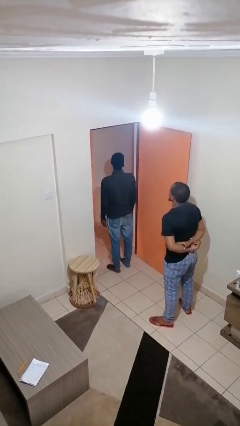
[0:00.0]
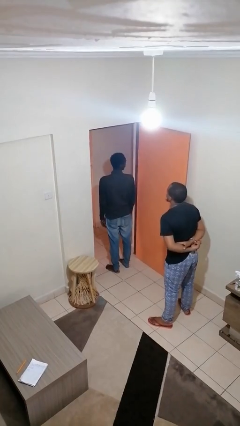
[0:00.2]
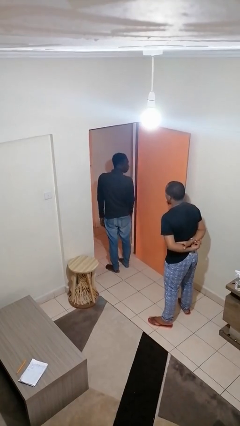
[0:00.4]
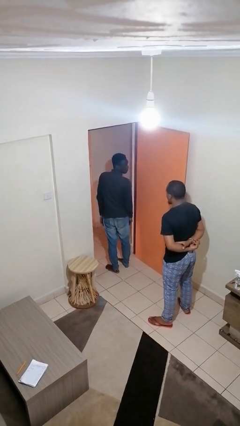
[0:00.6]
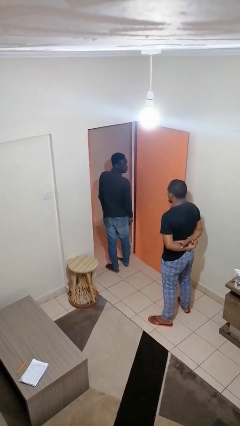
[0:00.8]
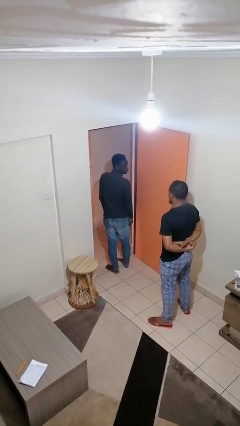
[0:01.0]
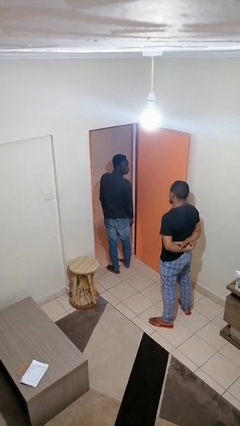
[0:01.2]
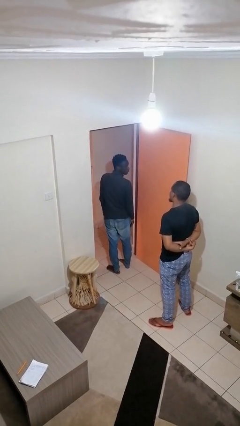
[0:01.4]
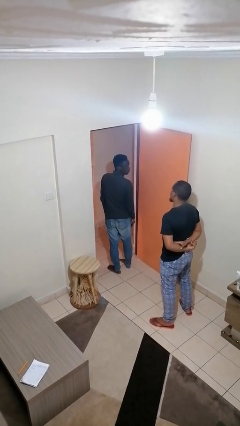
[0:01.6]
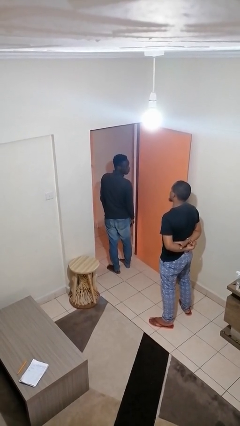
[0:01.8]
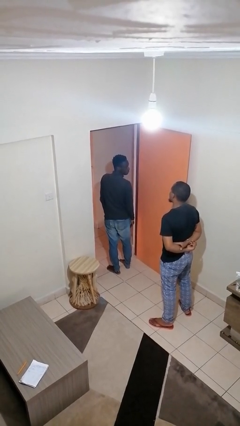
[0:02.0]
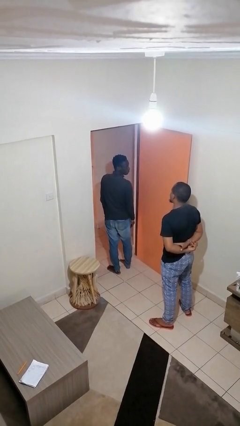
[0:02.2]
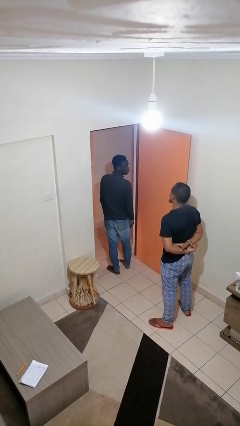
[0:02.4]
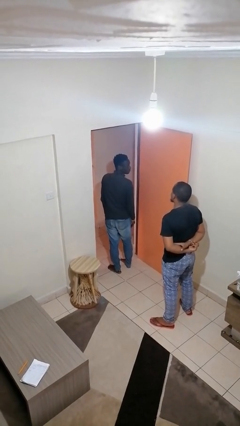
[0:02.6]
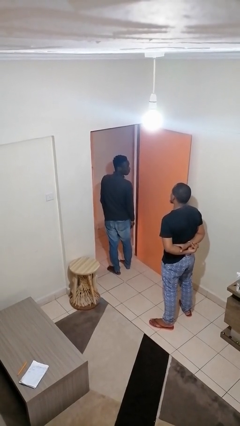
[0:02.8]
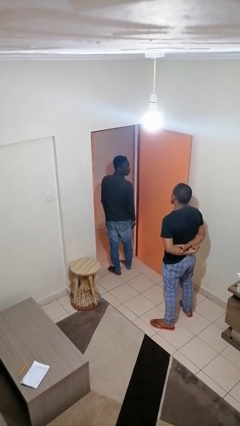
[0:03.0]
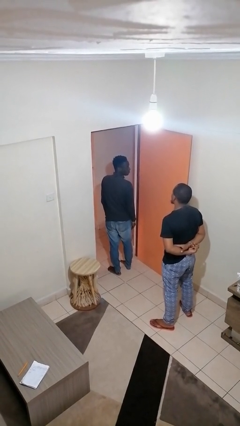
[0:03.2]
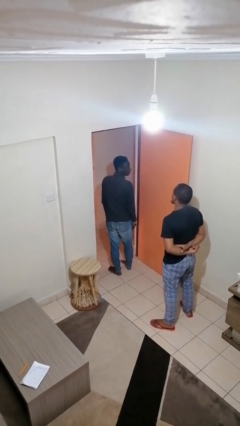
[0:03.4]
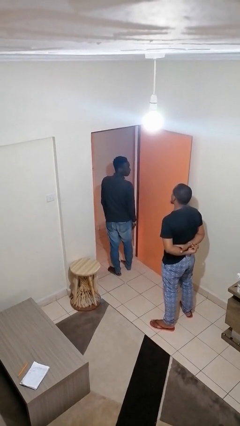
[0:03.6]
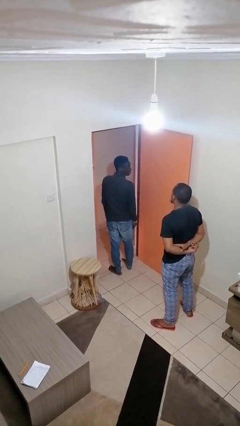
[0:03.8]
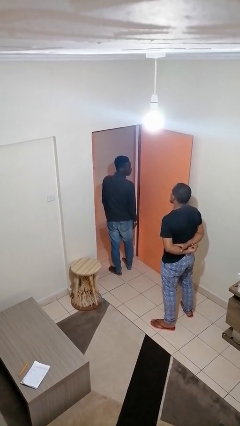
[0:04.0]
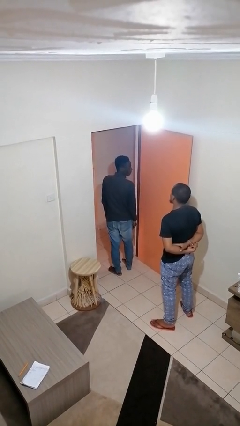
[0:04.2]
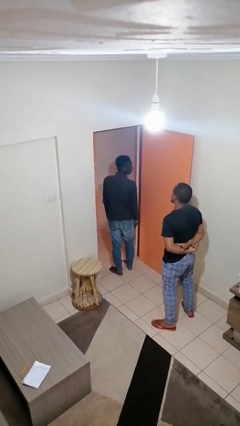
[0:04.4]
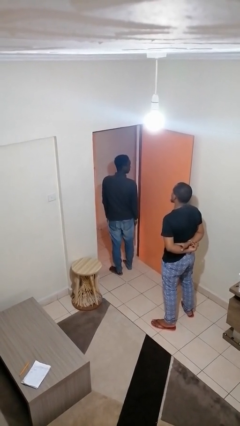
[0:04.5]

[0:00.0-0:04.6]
person looks over shoulder

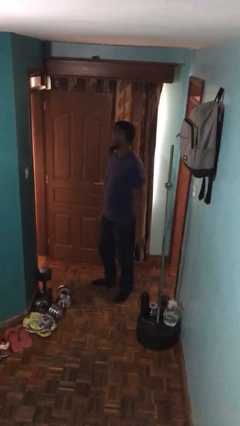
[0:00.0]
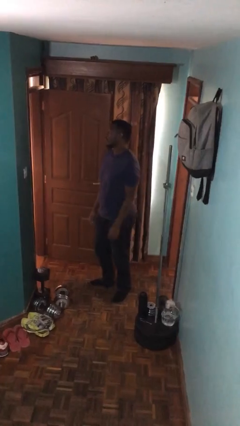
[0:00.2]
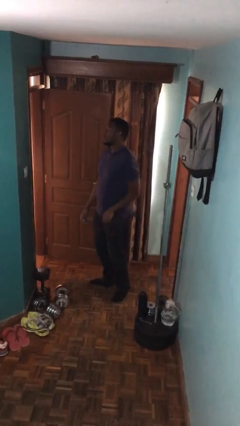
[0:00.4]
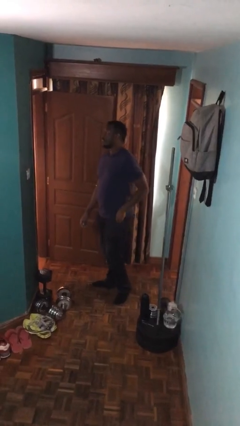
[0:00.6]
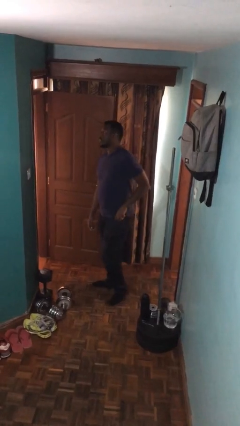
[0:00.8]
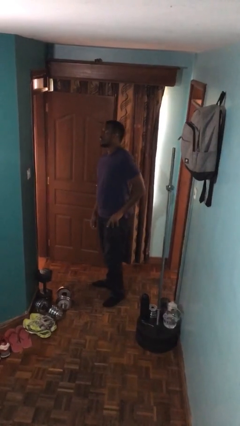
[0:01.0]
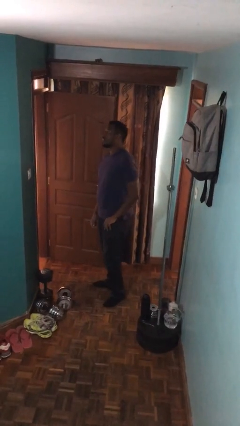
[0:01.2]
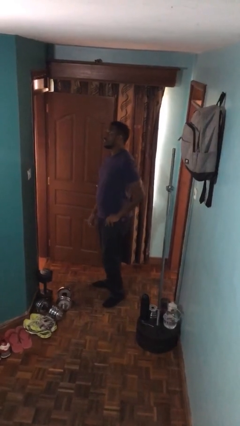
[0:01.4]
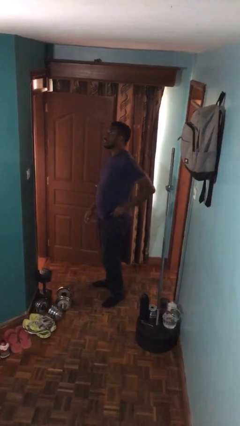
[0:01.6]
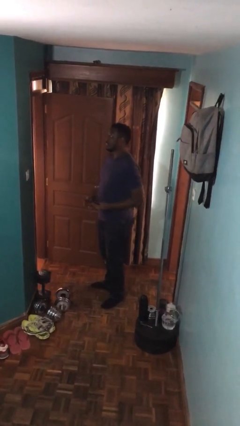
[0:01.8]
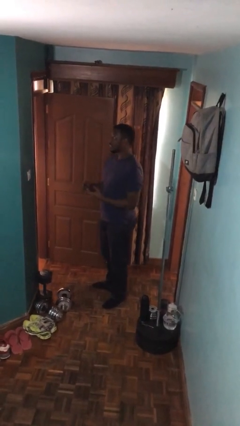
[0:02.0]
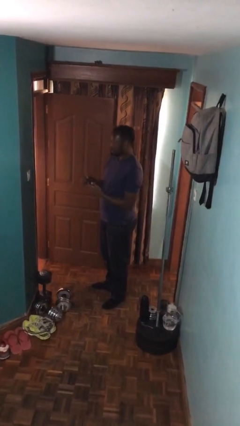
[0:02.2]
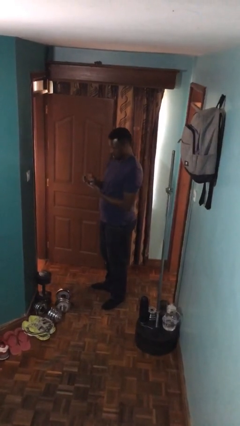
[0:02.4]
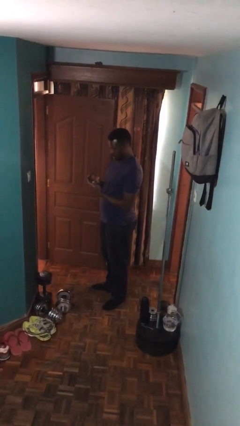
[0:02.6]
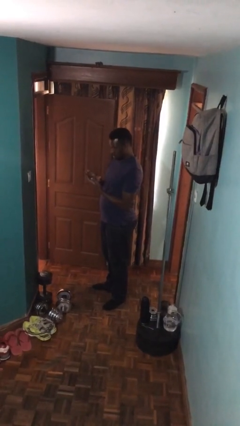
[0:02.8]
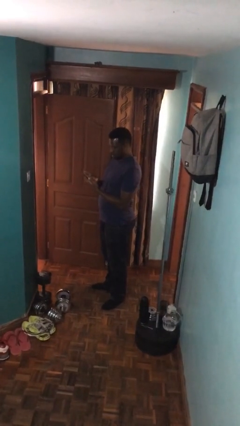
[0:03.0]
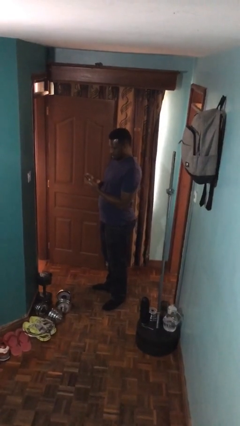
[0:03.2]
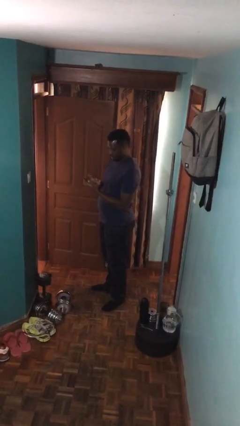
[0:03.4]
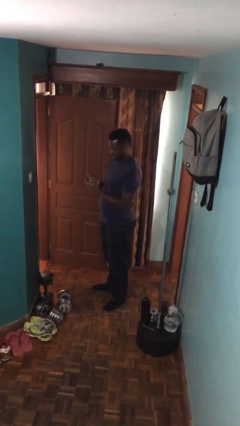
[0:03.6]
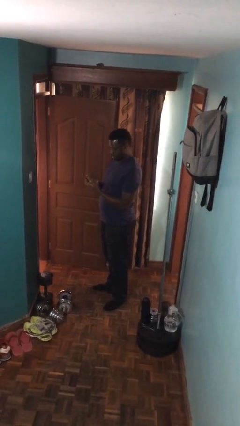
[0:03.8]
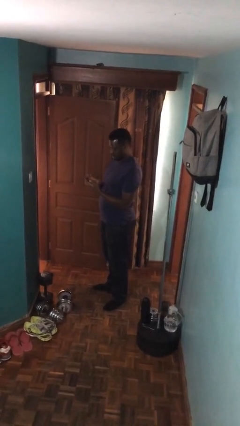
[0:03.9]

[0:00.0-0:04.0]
person takes phone from pocket

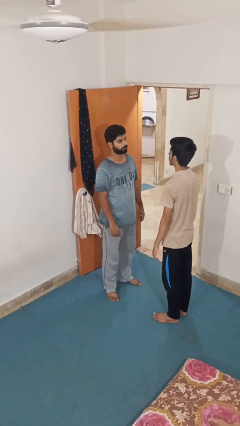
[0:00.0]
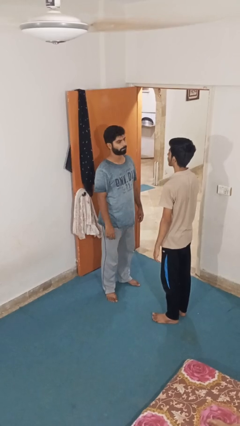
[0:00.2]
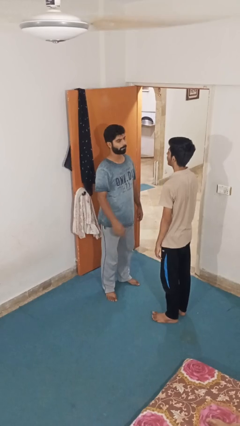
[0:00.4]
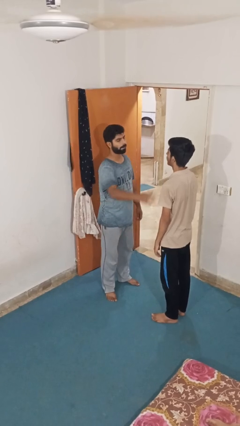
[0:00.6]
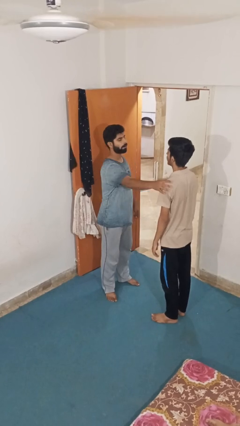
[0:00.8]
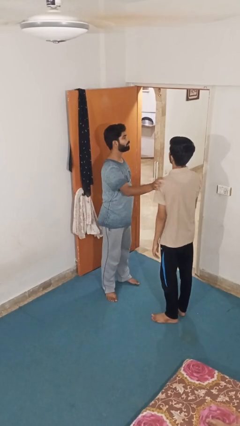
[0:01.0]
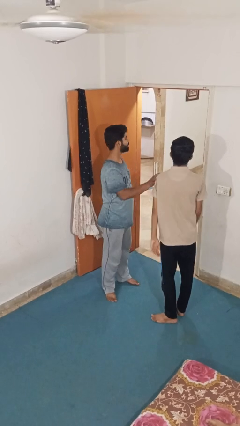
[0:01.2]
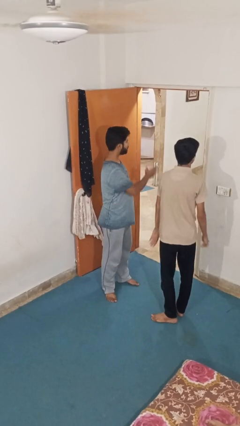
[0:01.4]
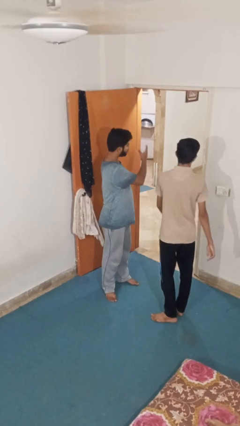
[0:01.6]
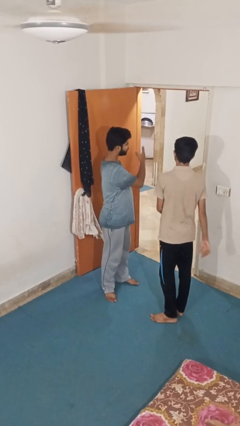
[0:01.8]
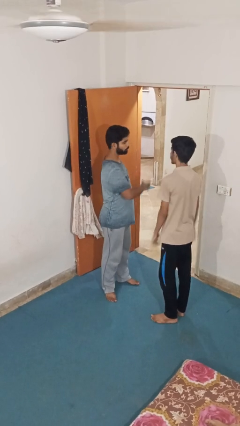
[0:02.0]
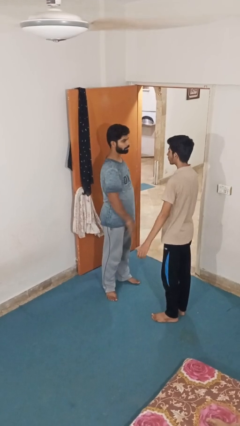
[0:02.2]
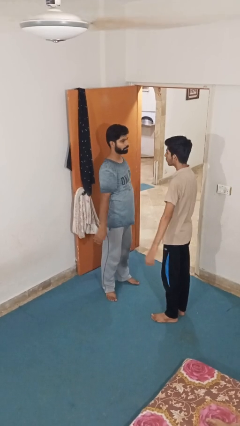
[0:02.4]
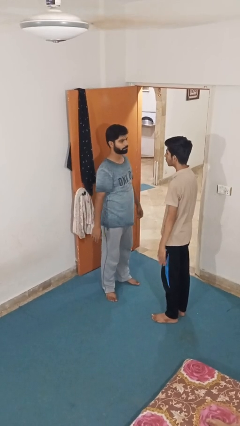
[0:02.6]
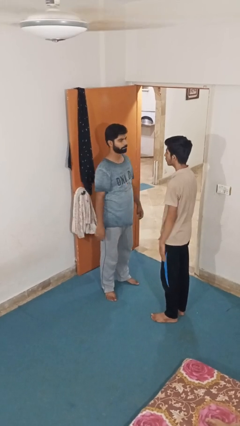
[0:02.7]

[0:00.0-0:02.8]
person shoves person

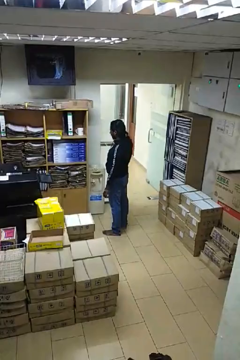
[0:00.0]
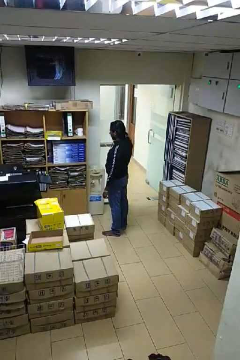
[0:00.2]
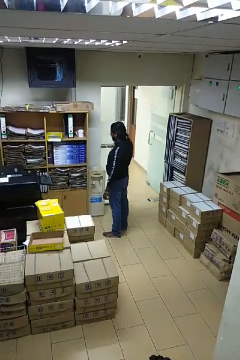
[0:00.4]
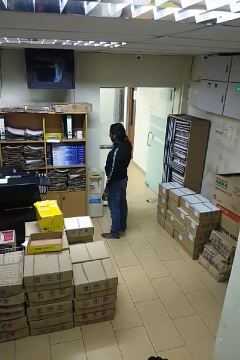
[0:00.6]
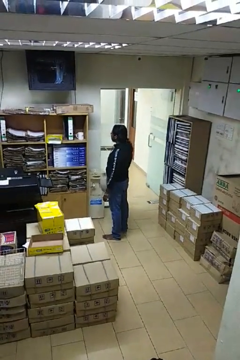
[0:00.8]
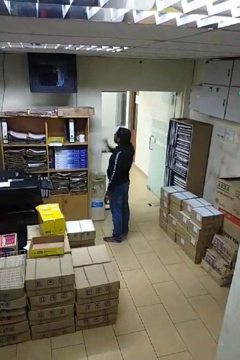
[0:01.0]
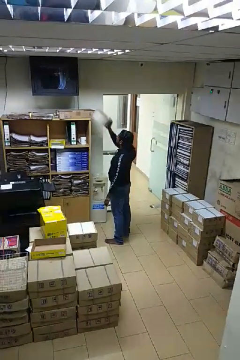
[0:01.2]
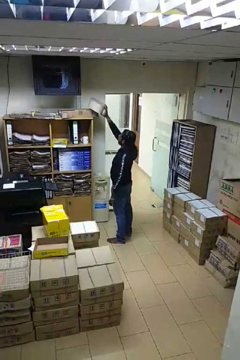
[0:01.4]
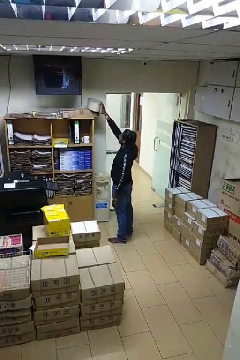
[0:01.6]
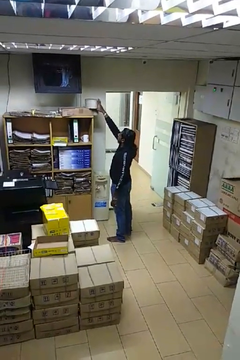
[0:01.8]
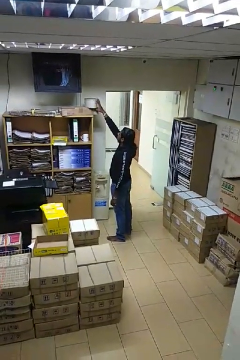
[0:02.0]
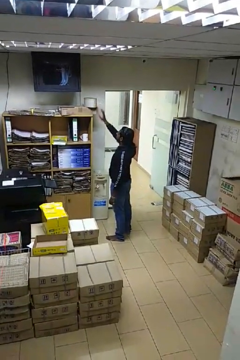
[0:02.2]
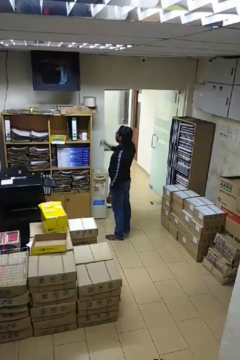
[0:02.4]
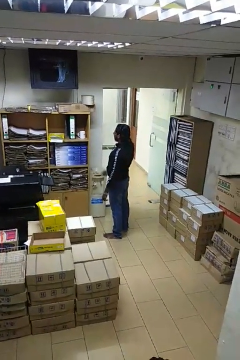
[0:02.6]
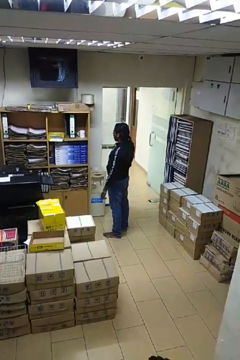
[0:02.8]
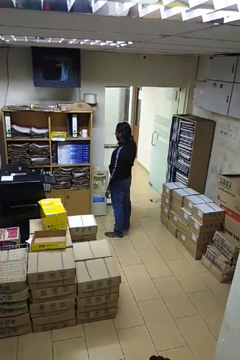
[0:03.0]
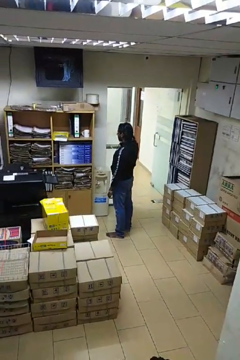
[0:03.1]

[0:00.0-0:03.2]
person puts down object on shelf

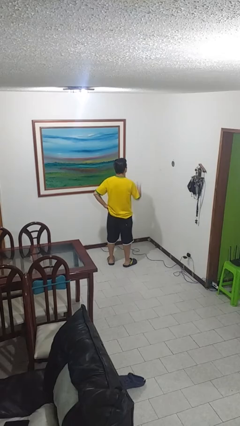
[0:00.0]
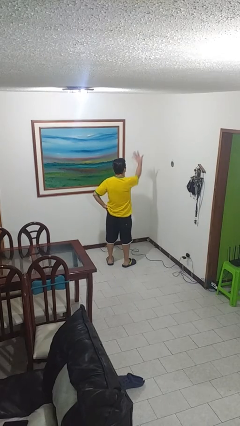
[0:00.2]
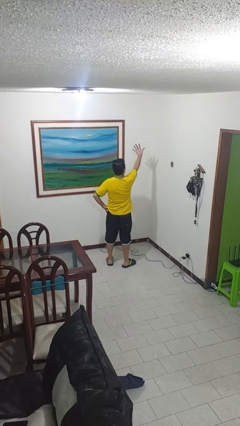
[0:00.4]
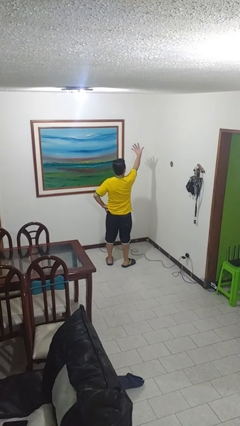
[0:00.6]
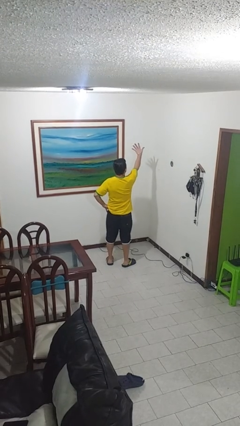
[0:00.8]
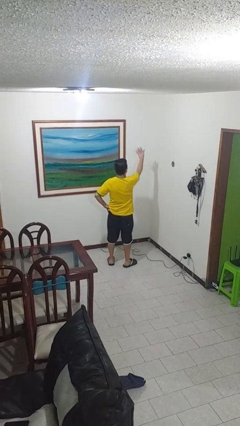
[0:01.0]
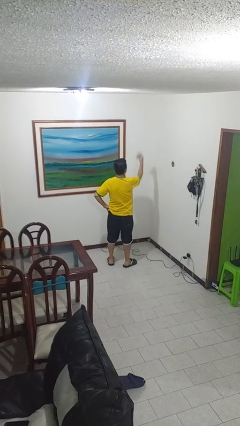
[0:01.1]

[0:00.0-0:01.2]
person gestures number five

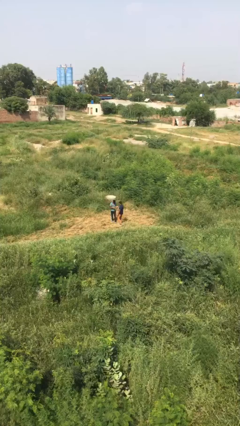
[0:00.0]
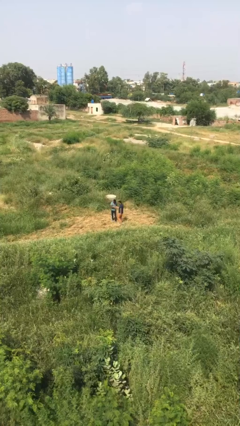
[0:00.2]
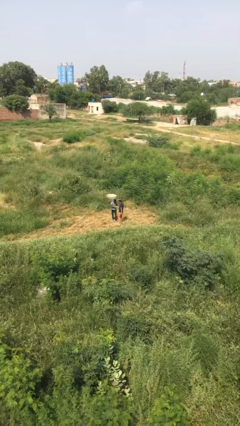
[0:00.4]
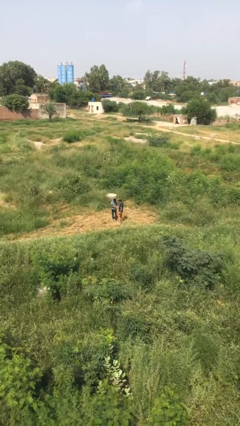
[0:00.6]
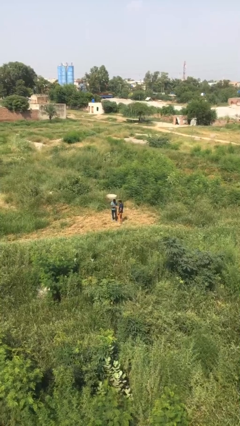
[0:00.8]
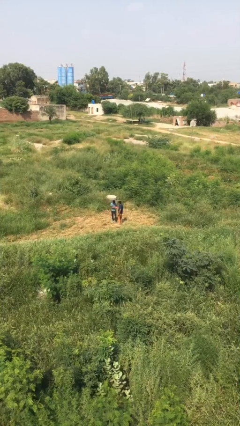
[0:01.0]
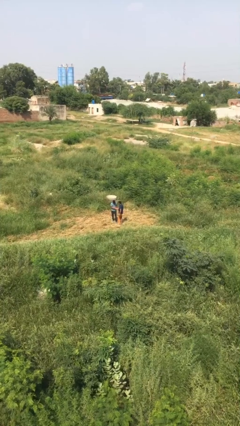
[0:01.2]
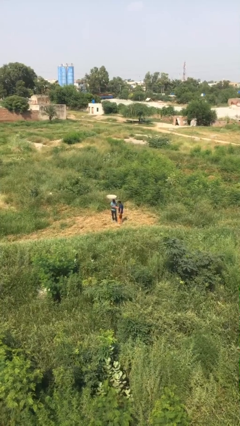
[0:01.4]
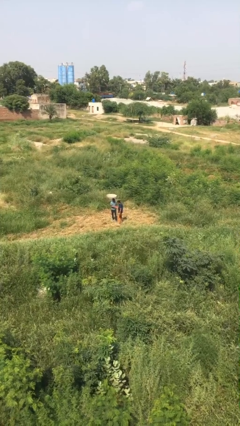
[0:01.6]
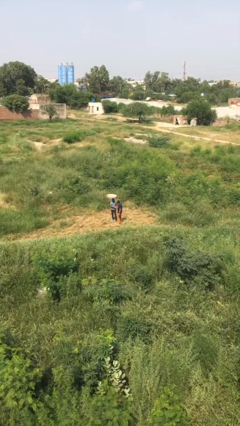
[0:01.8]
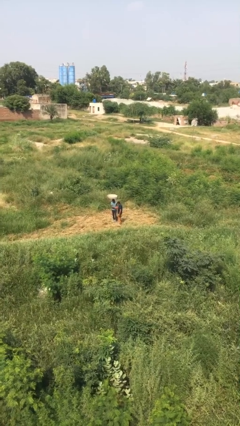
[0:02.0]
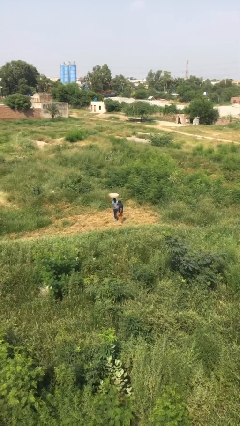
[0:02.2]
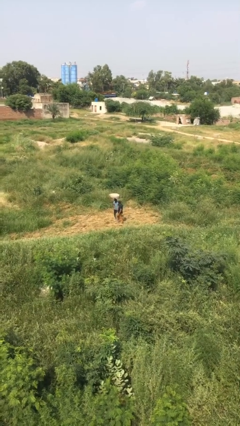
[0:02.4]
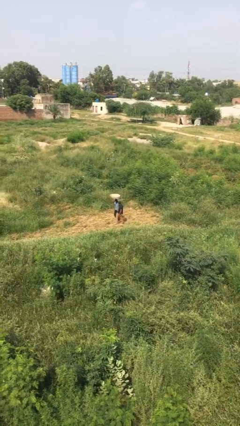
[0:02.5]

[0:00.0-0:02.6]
person shakes hand
